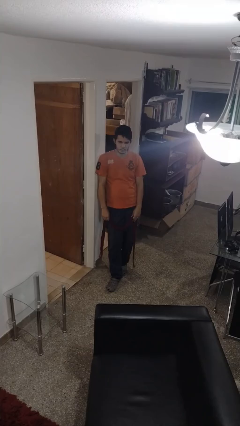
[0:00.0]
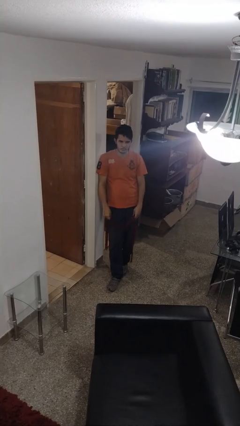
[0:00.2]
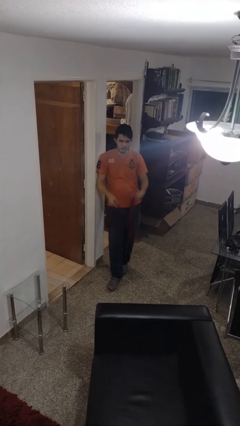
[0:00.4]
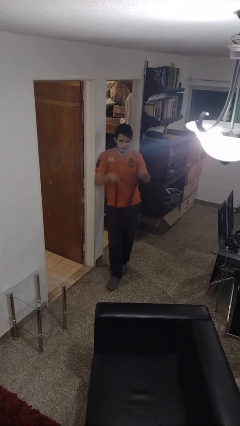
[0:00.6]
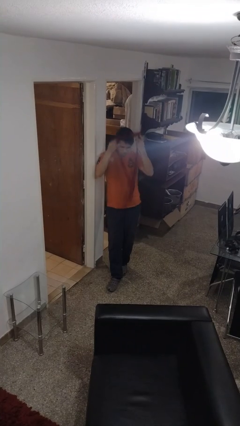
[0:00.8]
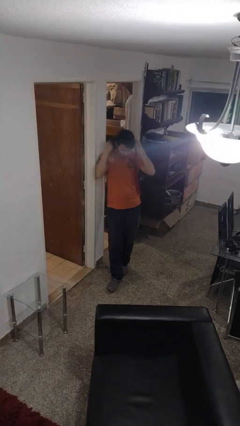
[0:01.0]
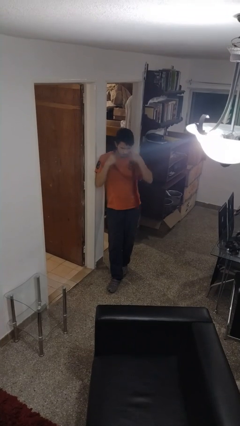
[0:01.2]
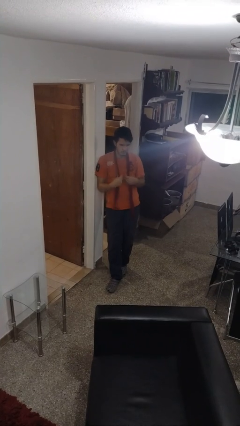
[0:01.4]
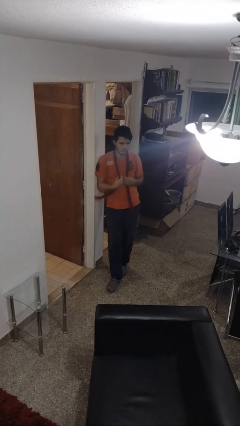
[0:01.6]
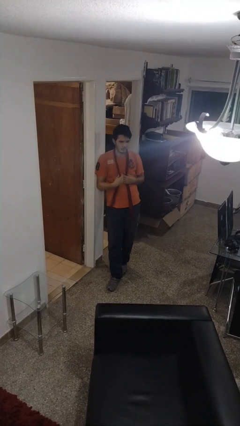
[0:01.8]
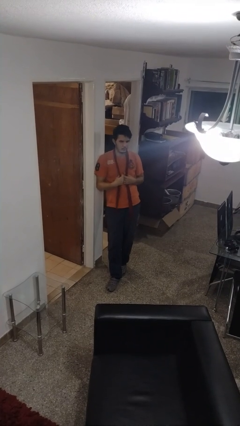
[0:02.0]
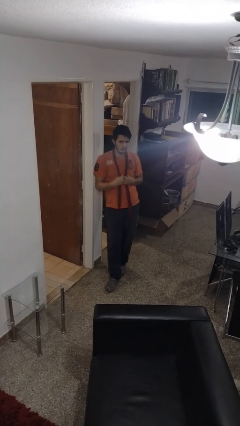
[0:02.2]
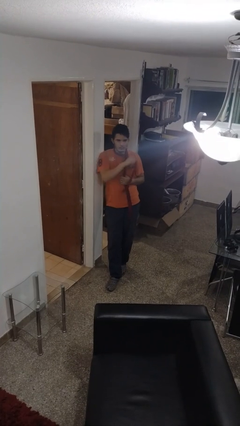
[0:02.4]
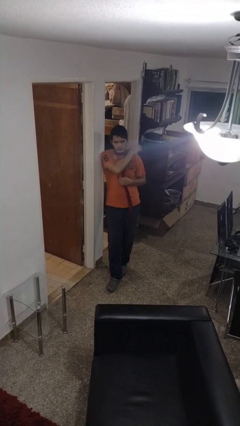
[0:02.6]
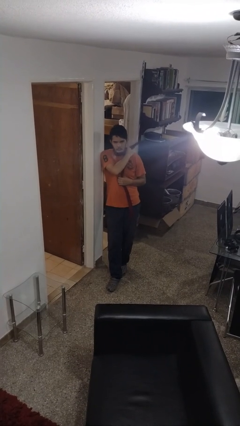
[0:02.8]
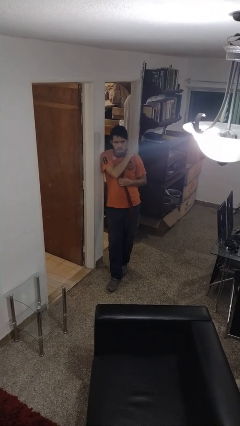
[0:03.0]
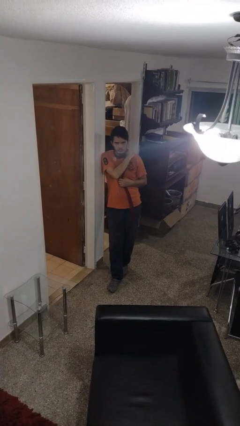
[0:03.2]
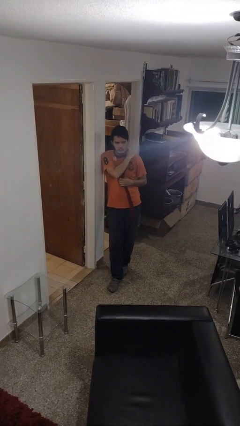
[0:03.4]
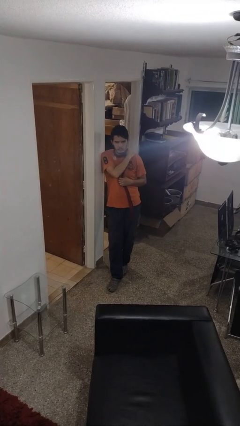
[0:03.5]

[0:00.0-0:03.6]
person puts on scarf

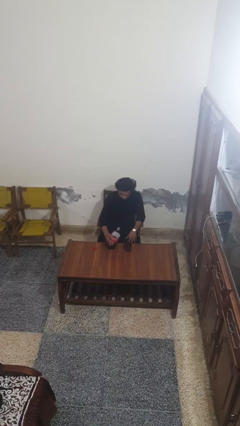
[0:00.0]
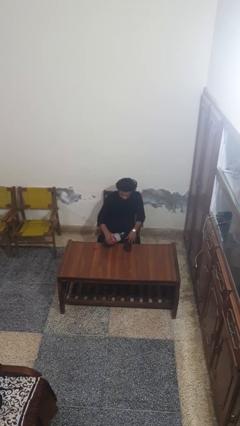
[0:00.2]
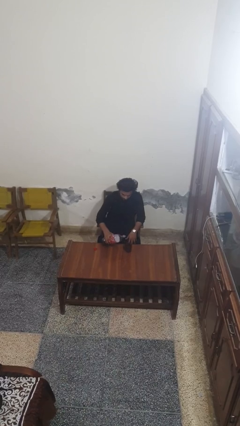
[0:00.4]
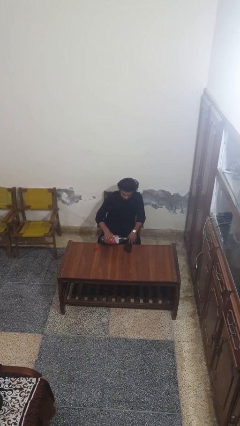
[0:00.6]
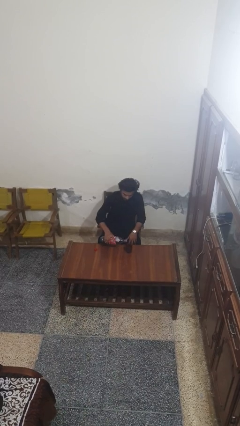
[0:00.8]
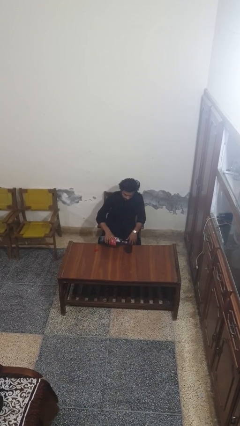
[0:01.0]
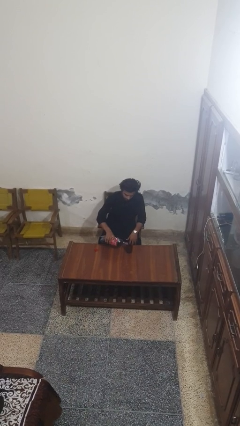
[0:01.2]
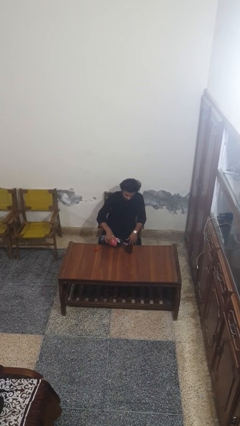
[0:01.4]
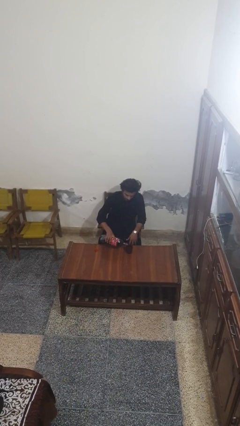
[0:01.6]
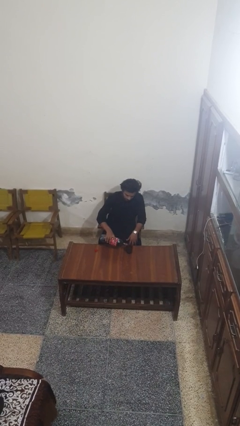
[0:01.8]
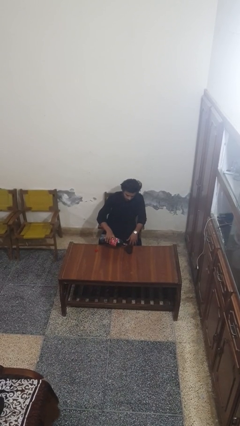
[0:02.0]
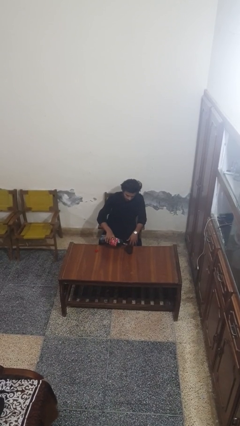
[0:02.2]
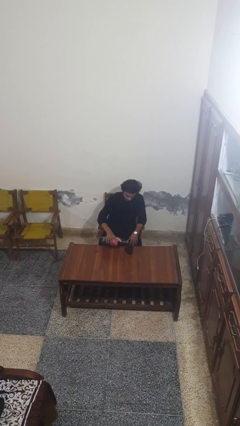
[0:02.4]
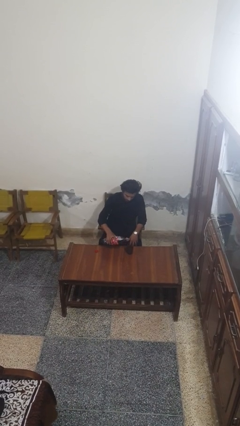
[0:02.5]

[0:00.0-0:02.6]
person pours liquid into cup

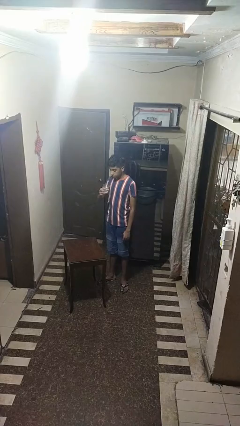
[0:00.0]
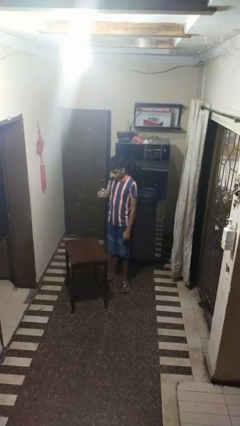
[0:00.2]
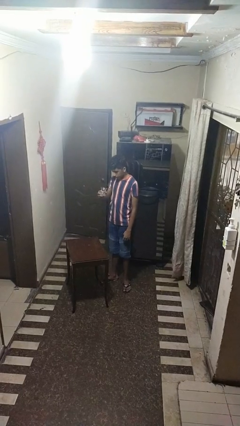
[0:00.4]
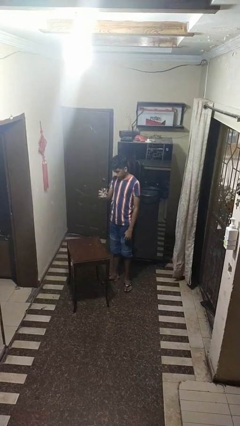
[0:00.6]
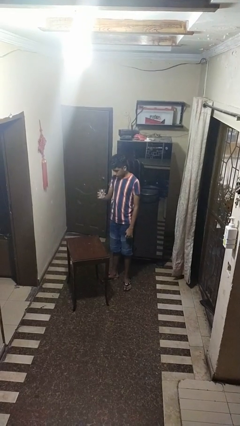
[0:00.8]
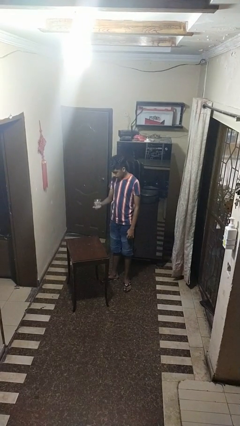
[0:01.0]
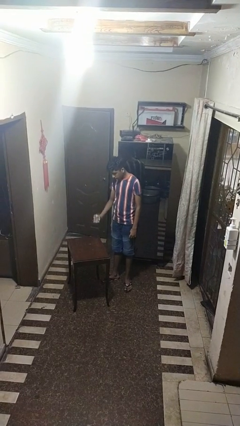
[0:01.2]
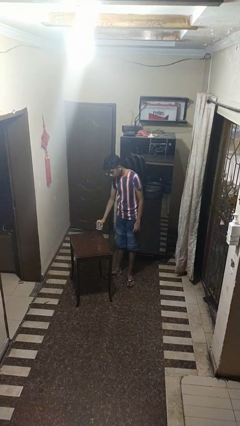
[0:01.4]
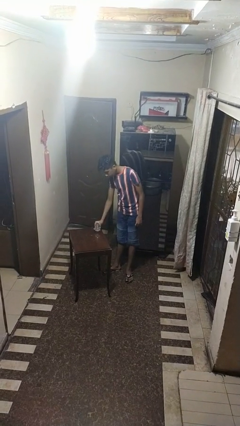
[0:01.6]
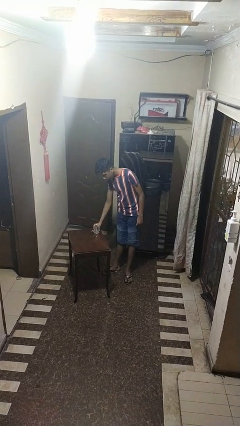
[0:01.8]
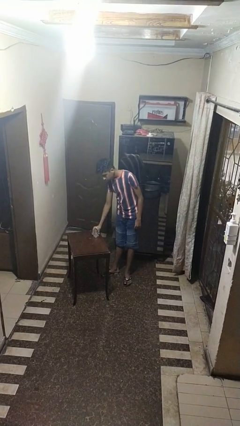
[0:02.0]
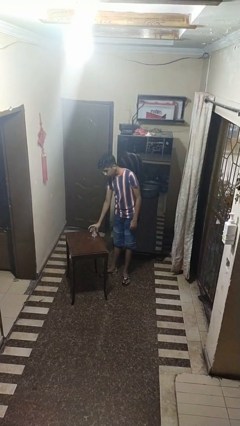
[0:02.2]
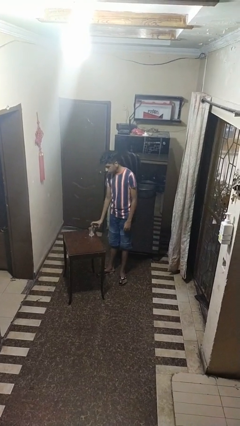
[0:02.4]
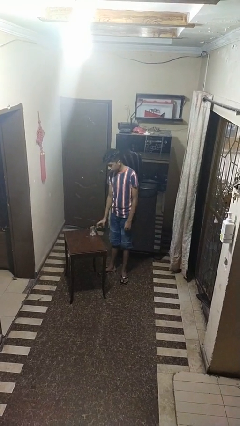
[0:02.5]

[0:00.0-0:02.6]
person puts down object on table

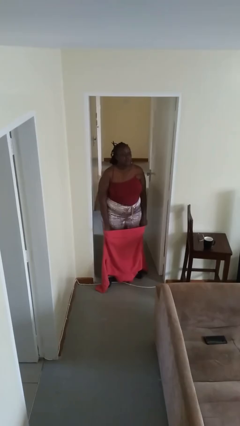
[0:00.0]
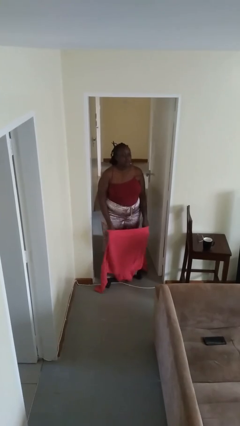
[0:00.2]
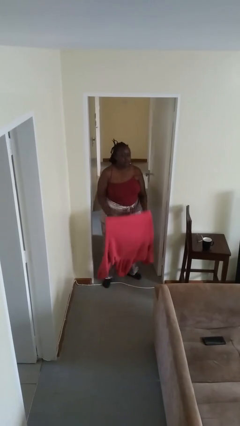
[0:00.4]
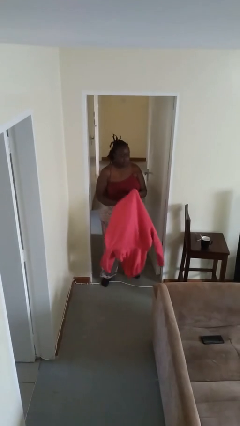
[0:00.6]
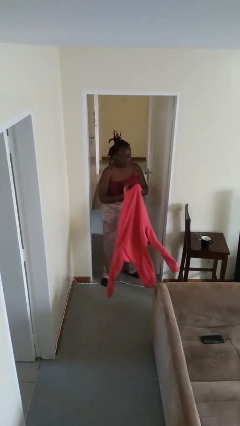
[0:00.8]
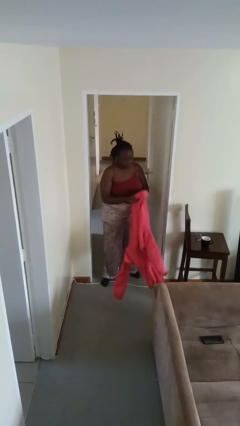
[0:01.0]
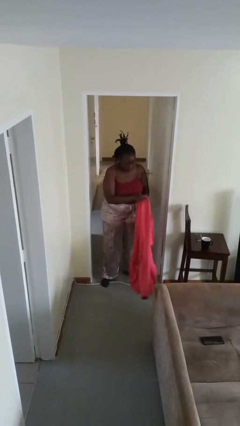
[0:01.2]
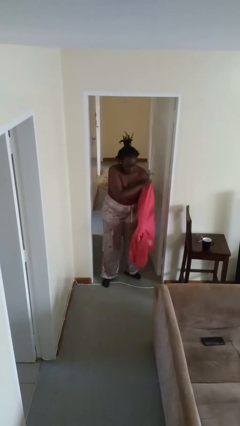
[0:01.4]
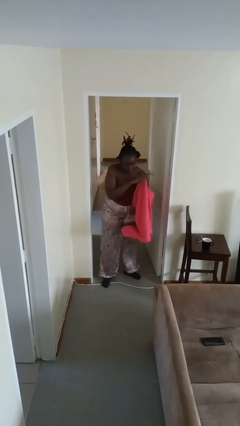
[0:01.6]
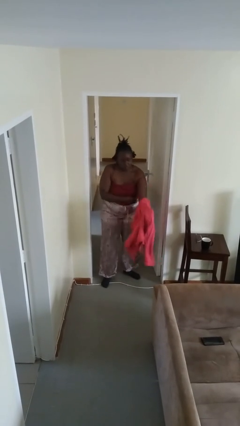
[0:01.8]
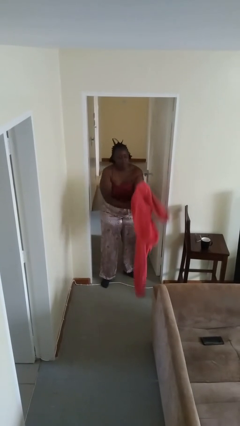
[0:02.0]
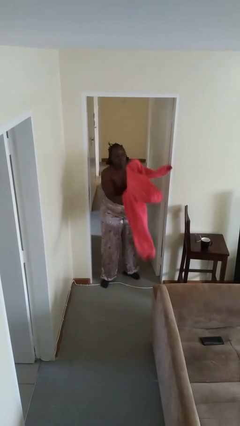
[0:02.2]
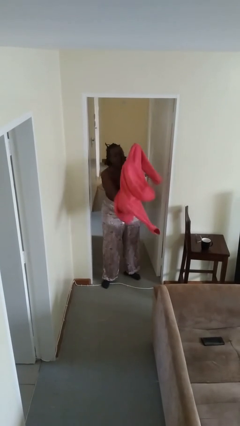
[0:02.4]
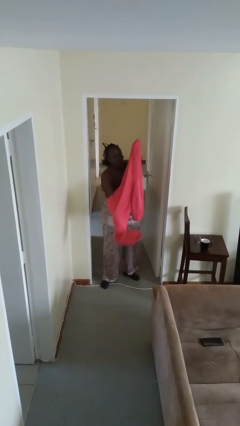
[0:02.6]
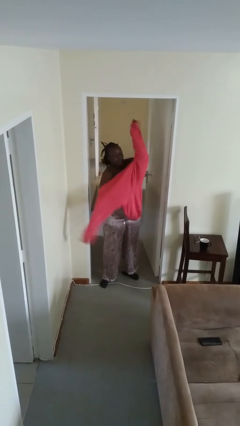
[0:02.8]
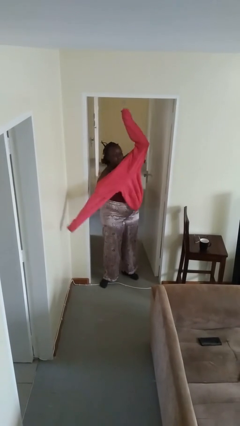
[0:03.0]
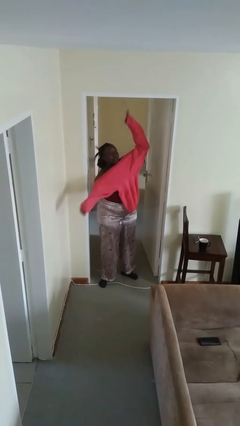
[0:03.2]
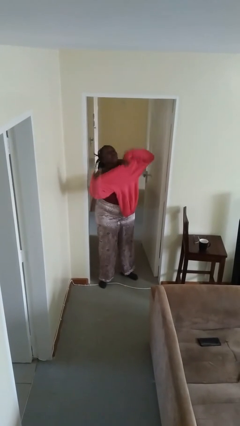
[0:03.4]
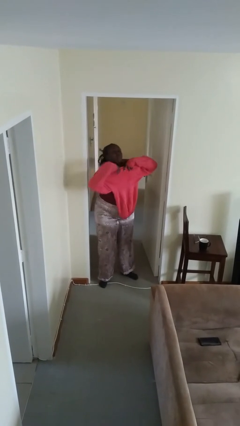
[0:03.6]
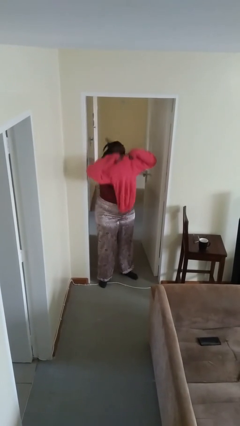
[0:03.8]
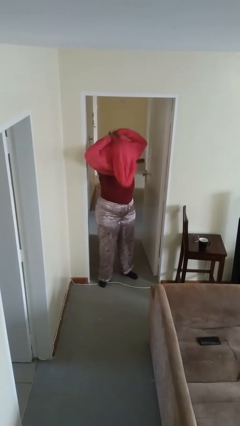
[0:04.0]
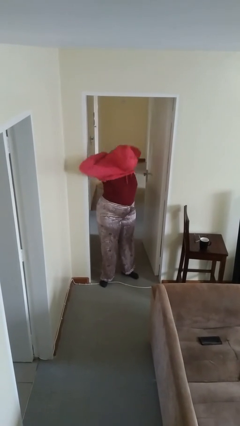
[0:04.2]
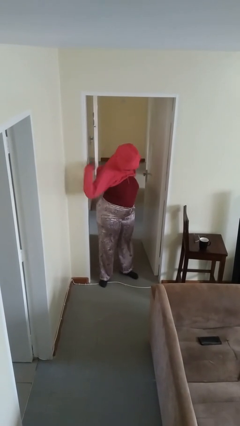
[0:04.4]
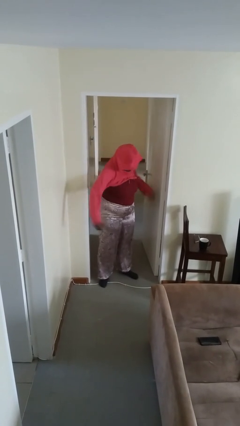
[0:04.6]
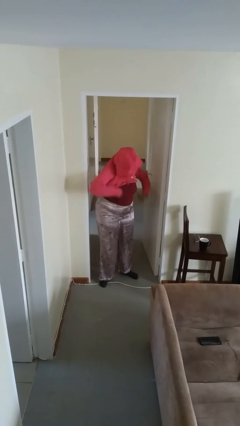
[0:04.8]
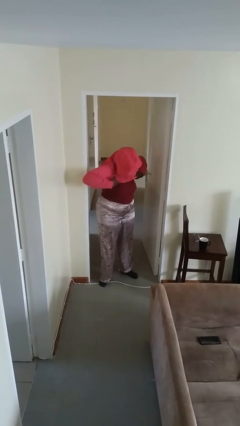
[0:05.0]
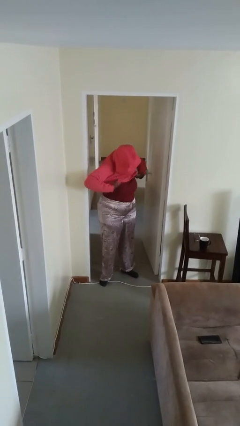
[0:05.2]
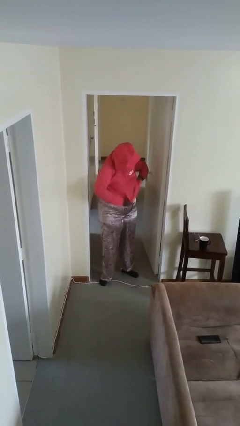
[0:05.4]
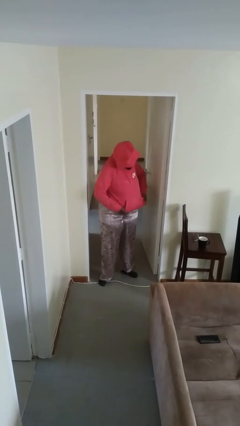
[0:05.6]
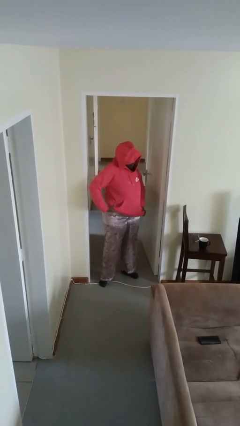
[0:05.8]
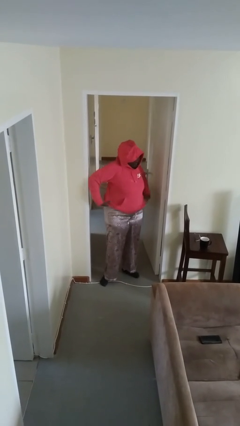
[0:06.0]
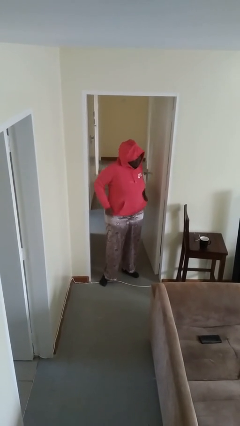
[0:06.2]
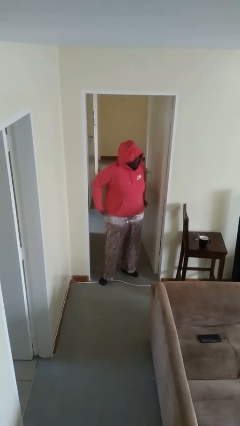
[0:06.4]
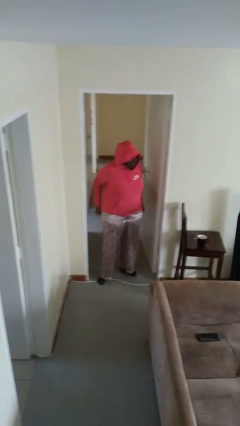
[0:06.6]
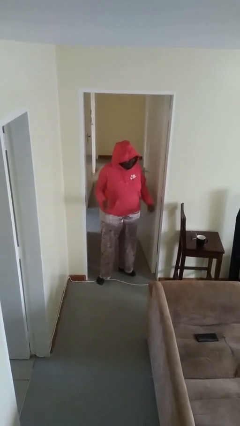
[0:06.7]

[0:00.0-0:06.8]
person puts on hoodie

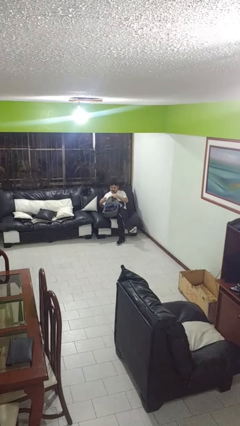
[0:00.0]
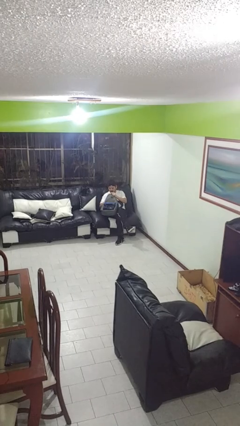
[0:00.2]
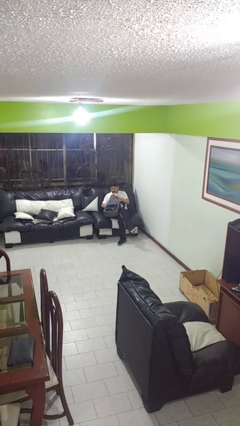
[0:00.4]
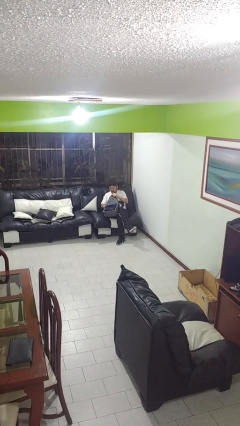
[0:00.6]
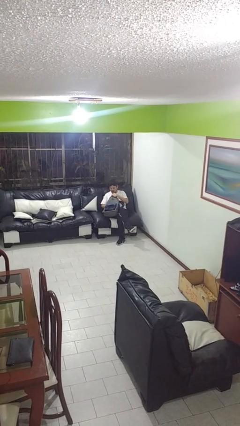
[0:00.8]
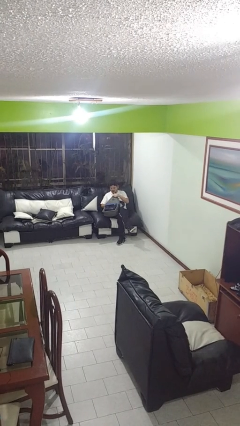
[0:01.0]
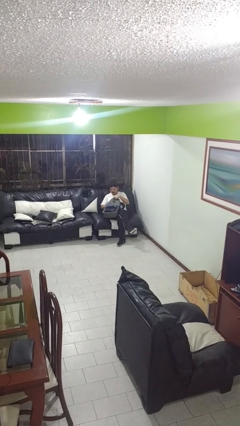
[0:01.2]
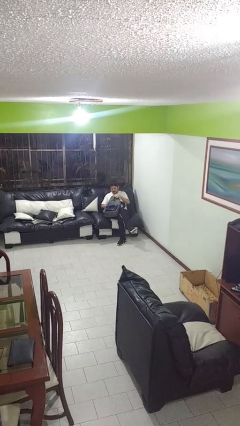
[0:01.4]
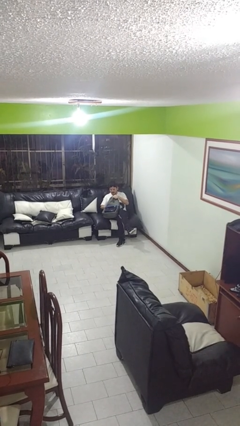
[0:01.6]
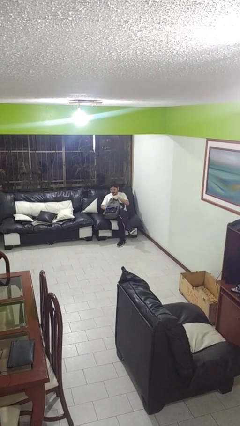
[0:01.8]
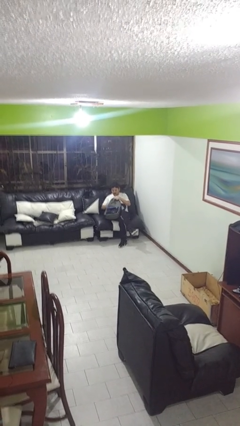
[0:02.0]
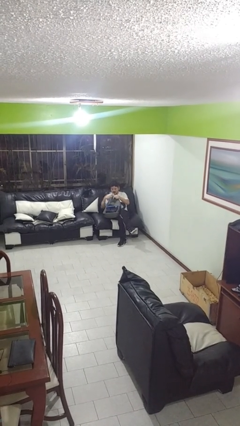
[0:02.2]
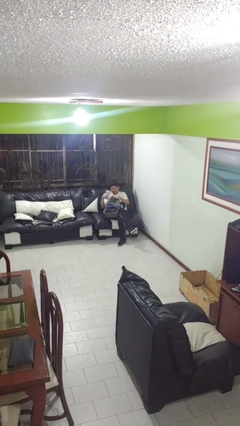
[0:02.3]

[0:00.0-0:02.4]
person searches in backpack
